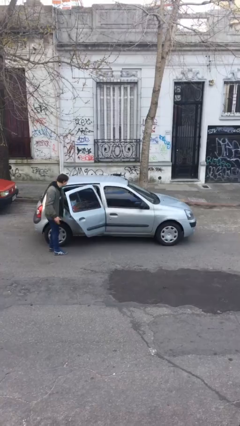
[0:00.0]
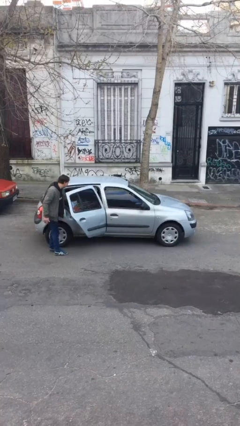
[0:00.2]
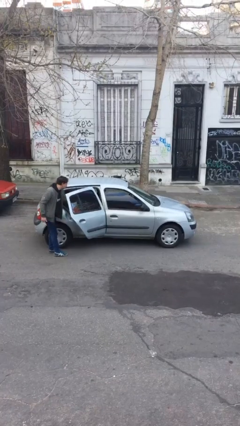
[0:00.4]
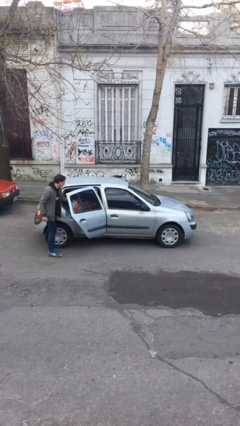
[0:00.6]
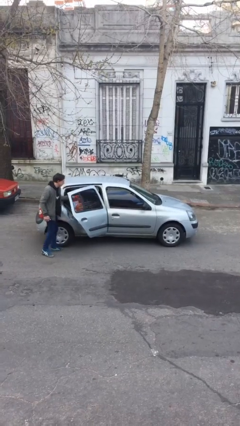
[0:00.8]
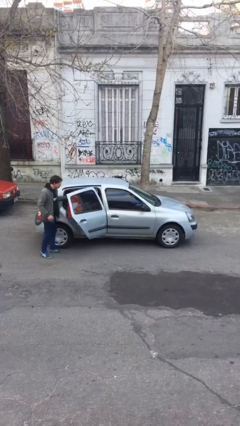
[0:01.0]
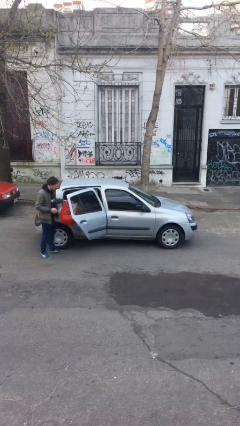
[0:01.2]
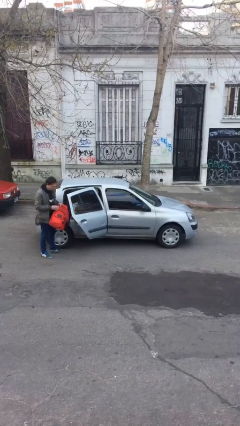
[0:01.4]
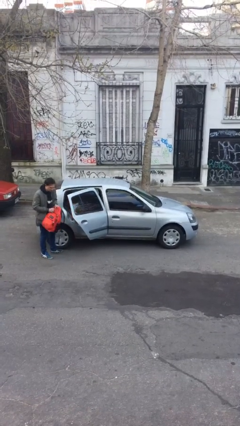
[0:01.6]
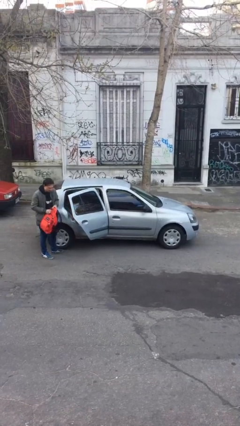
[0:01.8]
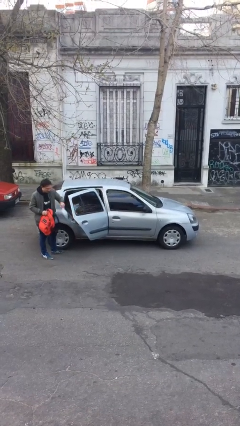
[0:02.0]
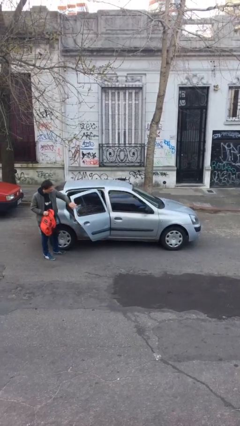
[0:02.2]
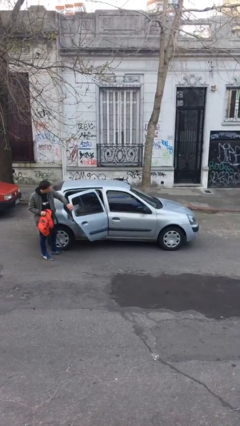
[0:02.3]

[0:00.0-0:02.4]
person unloads car

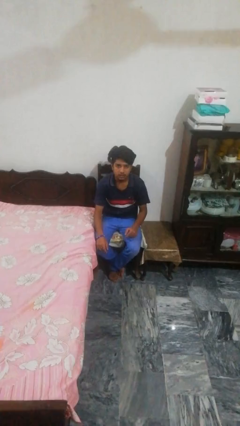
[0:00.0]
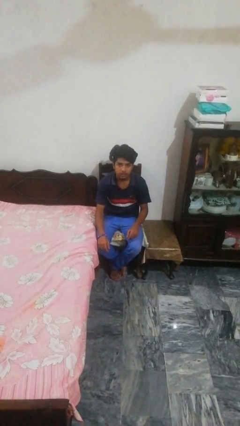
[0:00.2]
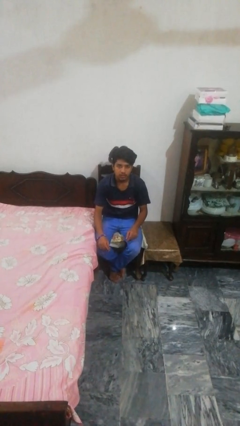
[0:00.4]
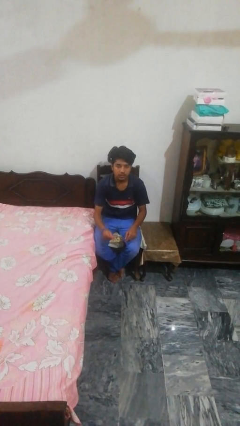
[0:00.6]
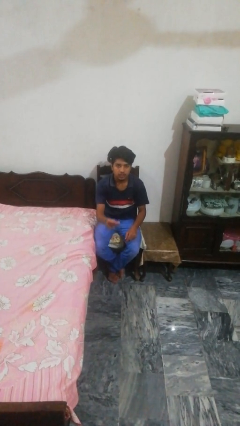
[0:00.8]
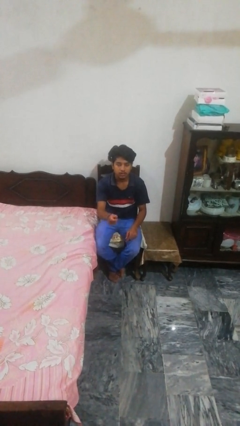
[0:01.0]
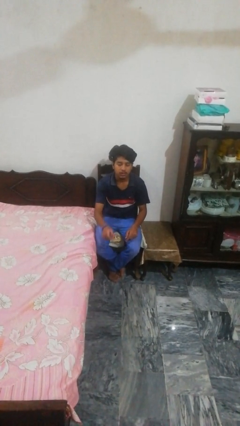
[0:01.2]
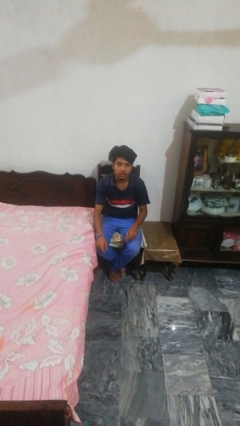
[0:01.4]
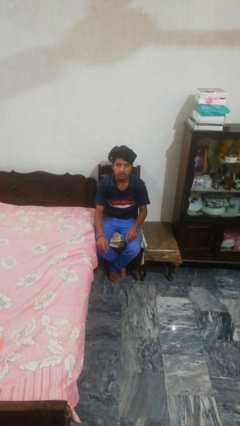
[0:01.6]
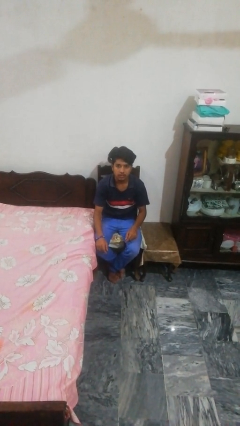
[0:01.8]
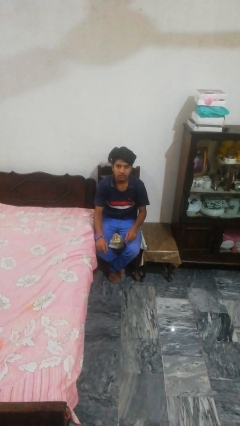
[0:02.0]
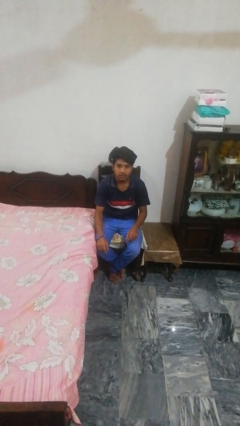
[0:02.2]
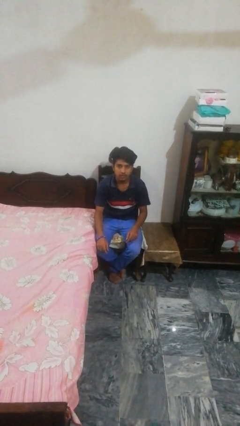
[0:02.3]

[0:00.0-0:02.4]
person snaps fingers

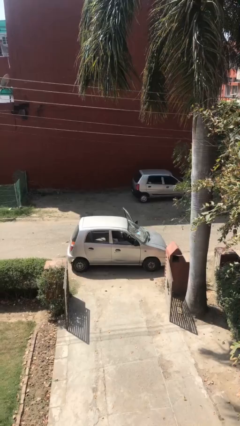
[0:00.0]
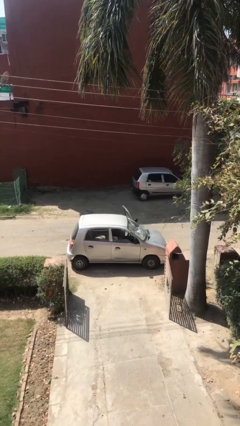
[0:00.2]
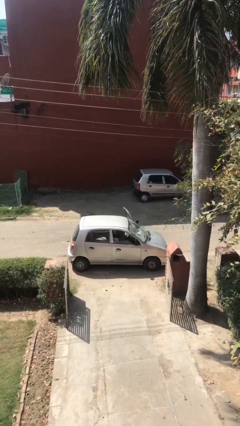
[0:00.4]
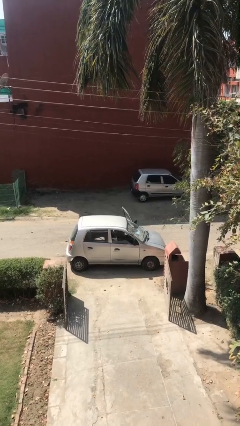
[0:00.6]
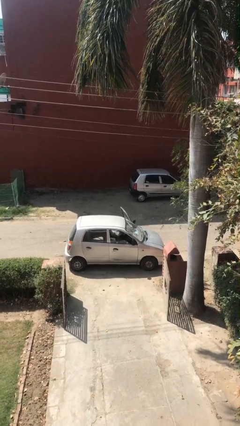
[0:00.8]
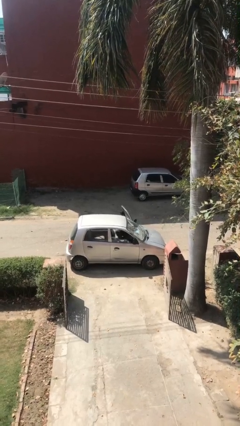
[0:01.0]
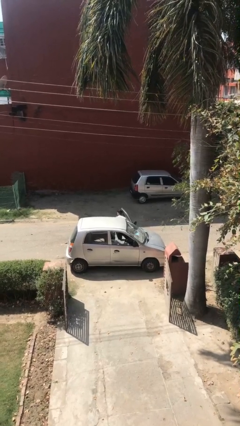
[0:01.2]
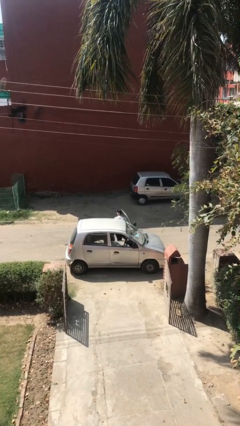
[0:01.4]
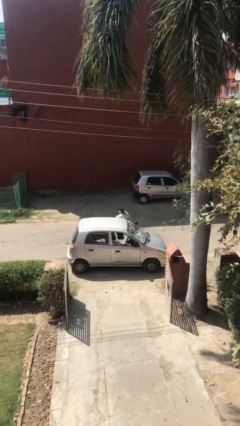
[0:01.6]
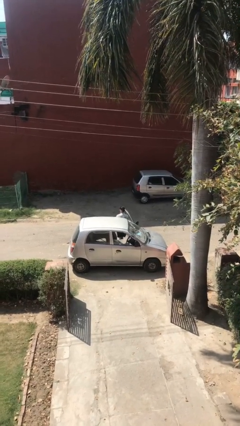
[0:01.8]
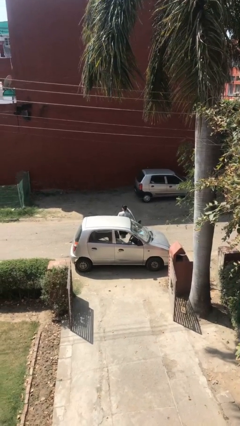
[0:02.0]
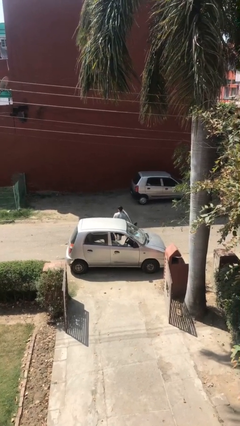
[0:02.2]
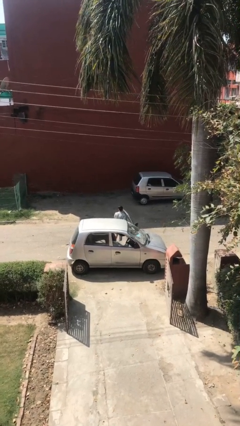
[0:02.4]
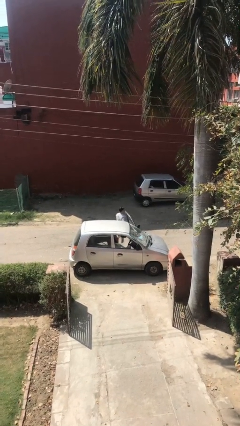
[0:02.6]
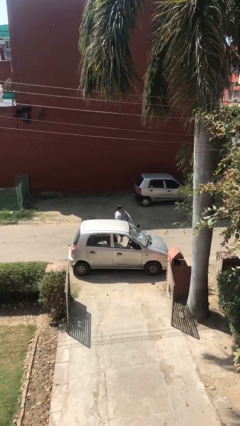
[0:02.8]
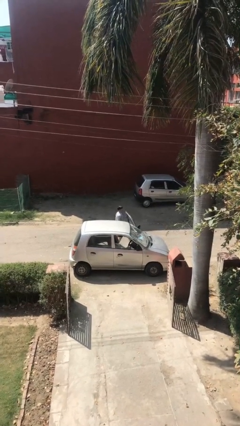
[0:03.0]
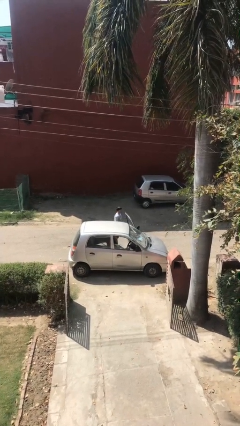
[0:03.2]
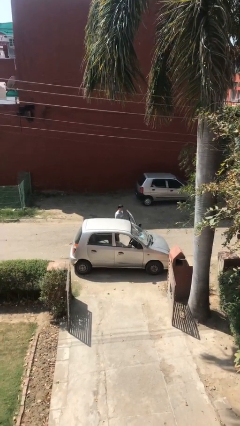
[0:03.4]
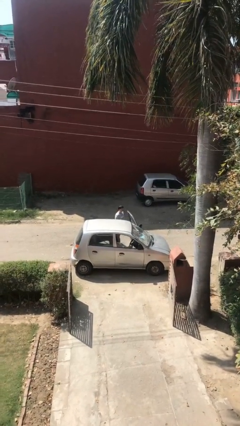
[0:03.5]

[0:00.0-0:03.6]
person exits car

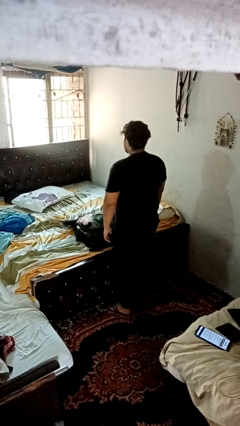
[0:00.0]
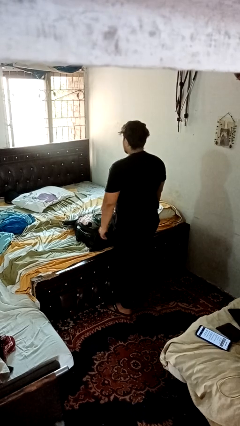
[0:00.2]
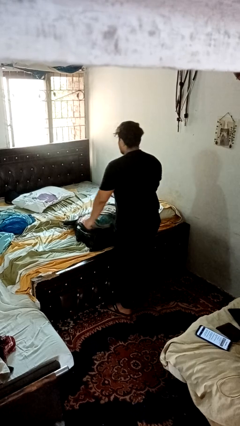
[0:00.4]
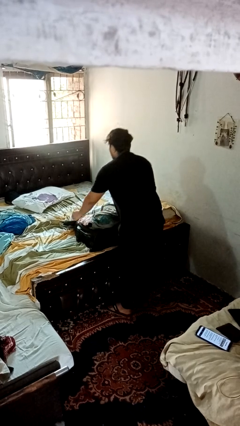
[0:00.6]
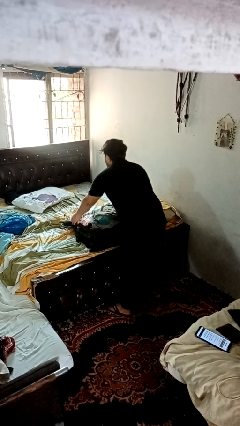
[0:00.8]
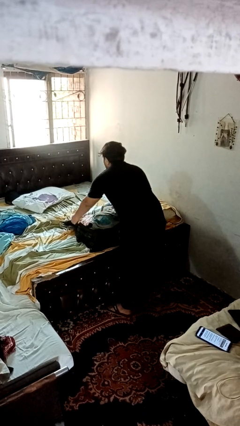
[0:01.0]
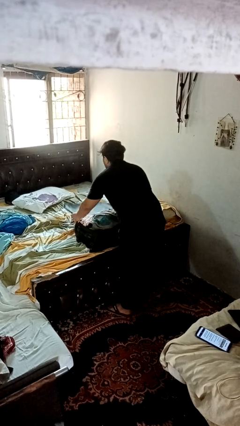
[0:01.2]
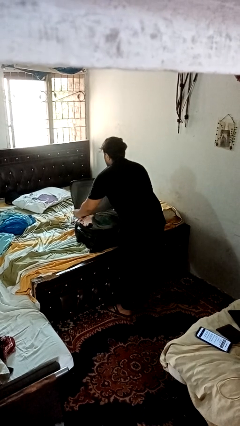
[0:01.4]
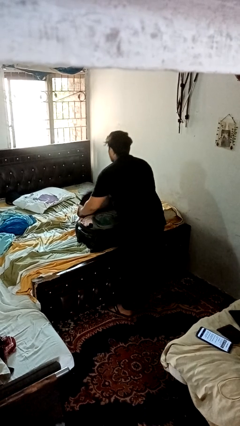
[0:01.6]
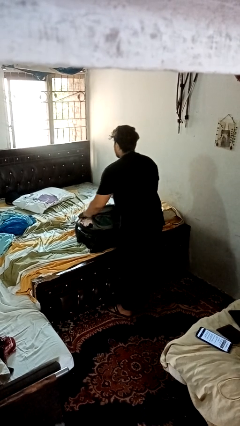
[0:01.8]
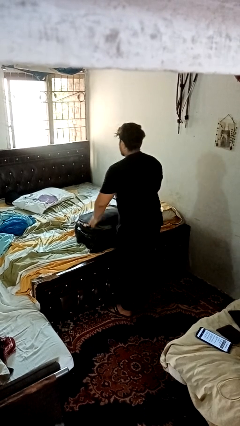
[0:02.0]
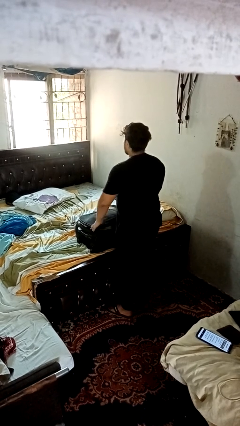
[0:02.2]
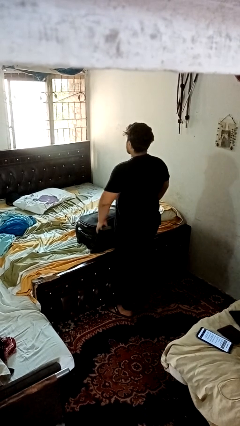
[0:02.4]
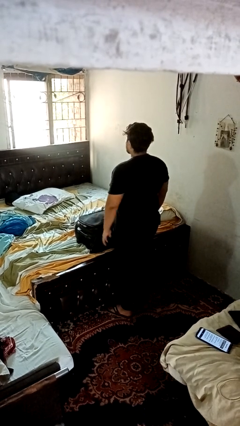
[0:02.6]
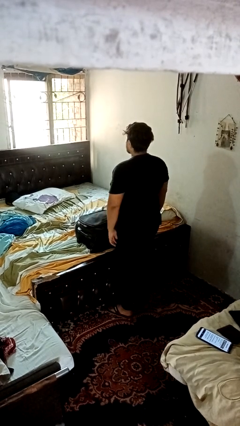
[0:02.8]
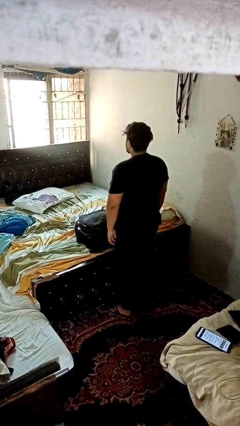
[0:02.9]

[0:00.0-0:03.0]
person closes suitcase

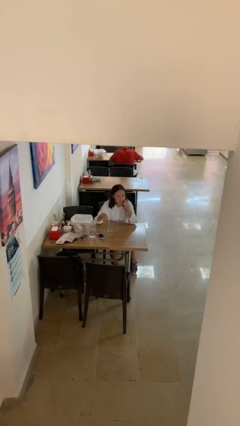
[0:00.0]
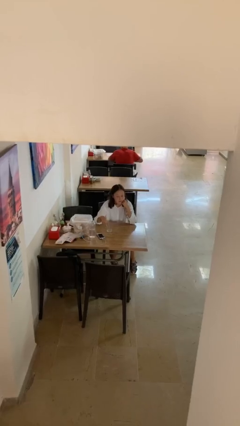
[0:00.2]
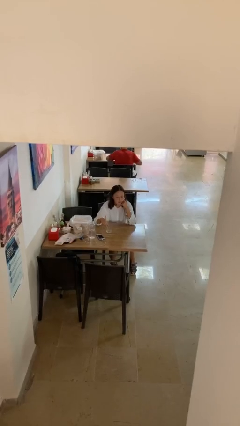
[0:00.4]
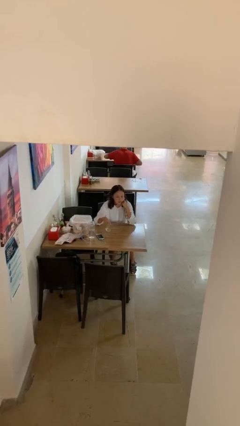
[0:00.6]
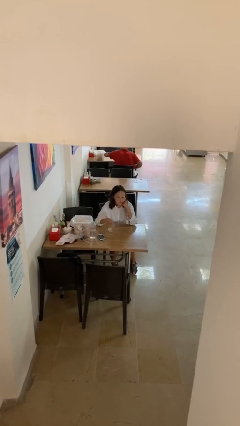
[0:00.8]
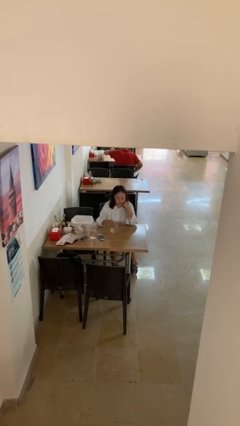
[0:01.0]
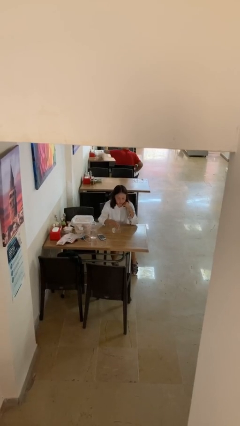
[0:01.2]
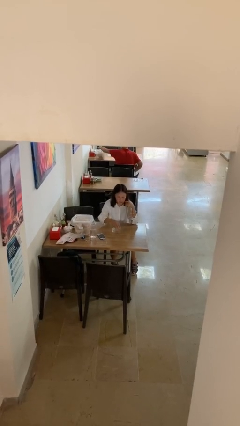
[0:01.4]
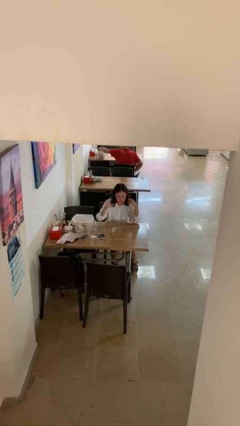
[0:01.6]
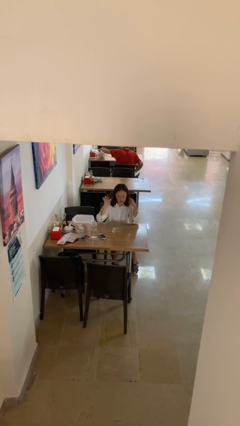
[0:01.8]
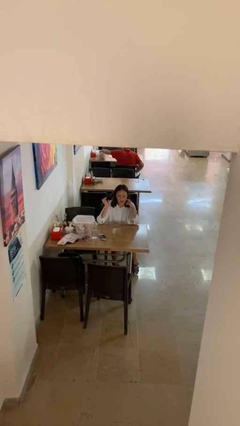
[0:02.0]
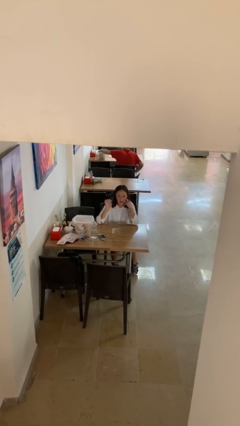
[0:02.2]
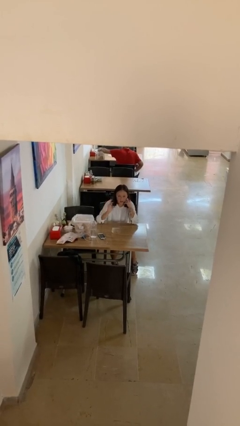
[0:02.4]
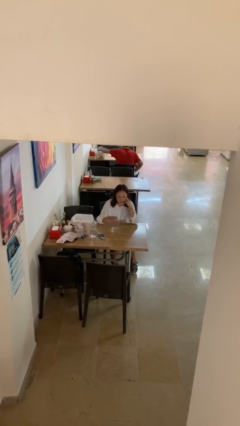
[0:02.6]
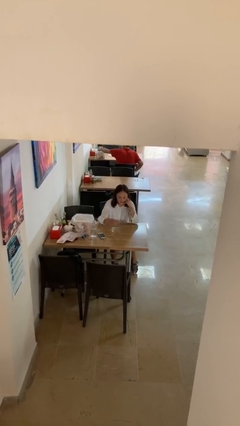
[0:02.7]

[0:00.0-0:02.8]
person knocks over glass

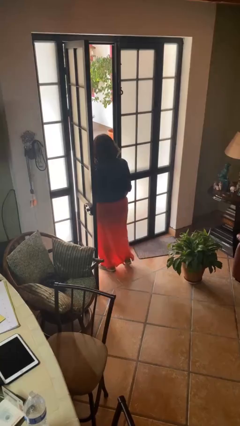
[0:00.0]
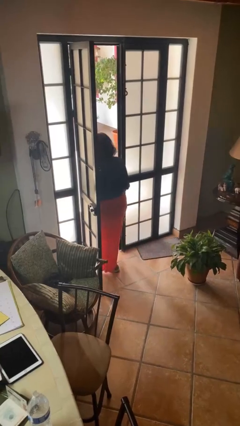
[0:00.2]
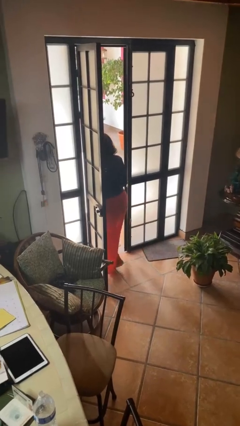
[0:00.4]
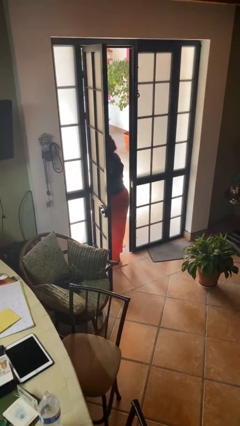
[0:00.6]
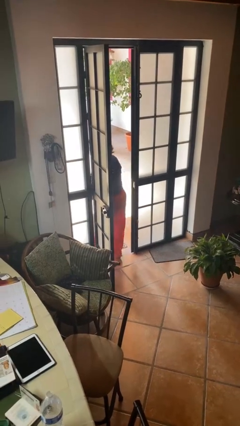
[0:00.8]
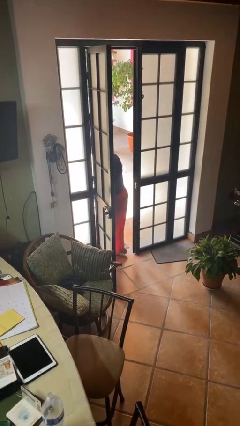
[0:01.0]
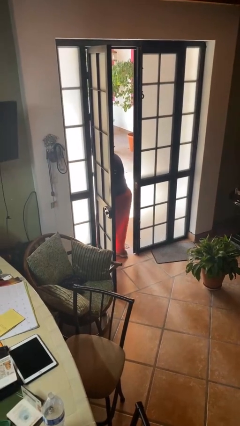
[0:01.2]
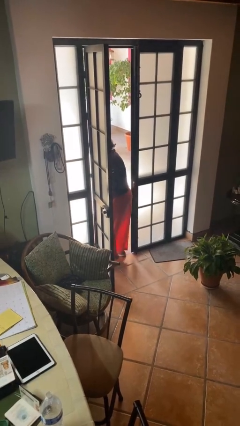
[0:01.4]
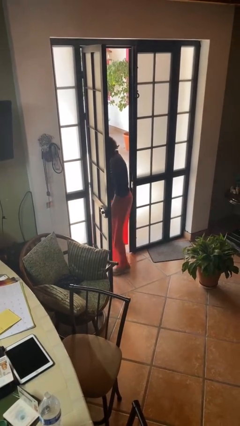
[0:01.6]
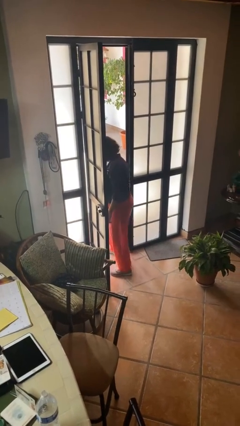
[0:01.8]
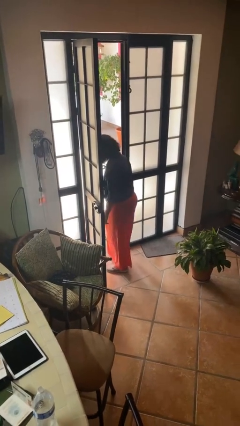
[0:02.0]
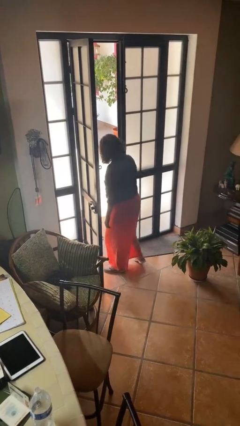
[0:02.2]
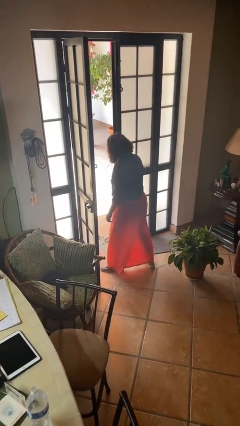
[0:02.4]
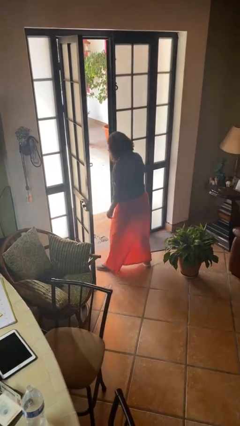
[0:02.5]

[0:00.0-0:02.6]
person bumps into wall

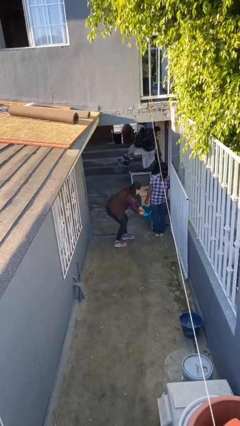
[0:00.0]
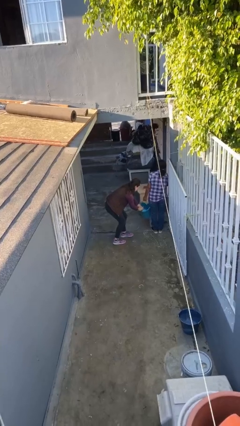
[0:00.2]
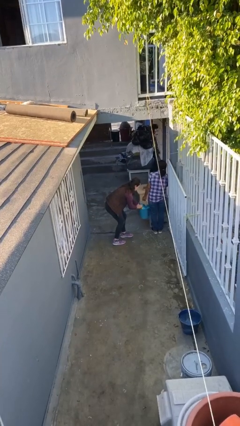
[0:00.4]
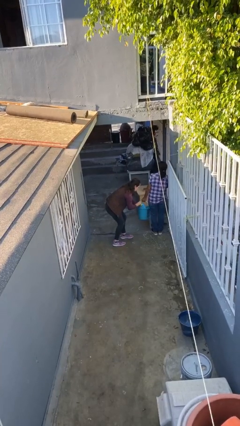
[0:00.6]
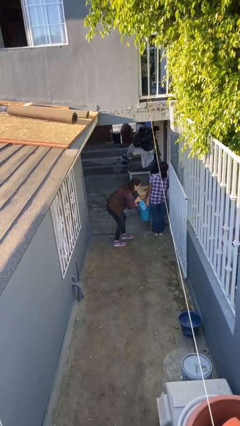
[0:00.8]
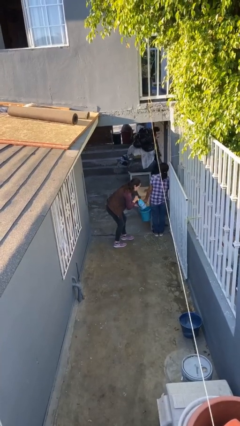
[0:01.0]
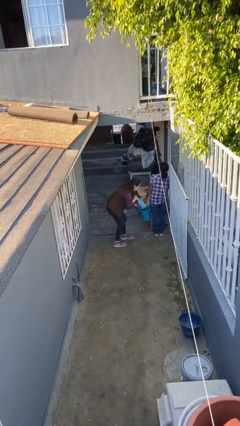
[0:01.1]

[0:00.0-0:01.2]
person steals object from person
